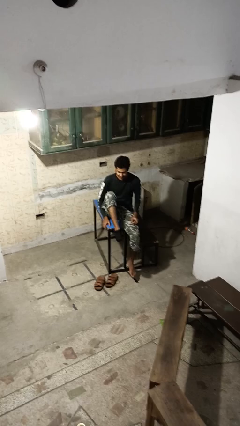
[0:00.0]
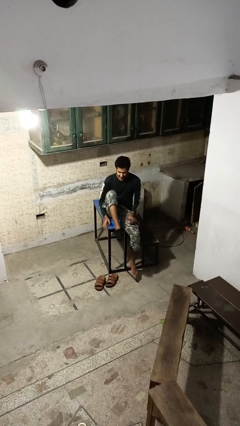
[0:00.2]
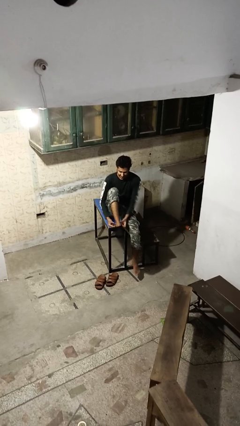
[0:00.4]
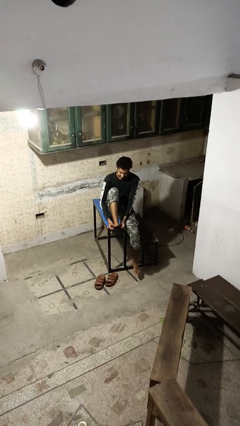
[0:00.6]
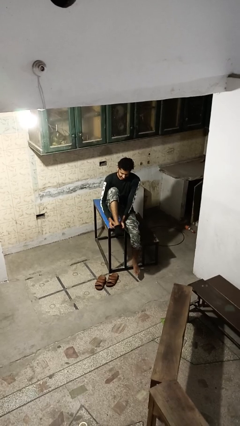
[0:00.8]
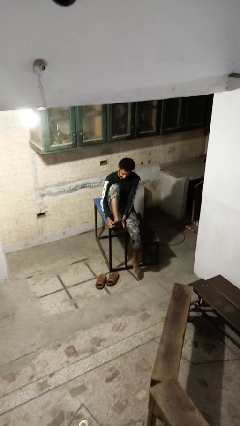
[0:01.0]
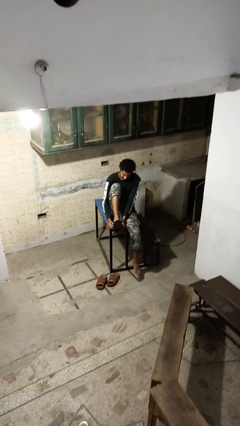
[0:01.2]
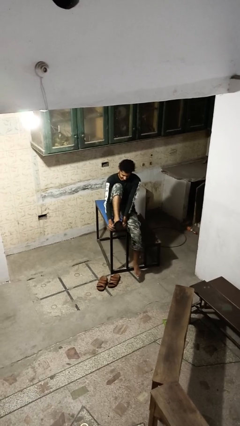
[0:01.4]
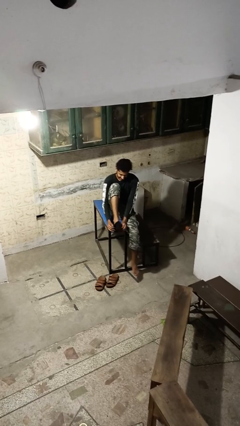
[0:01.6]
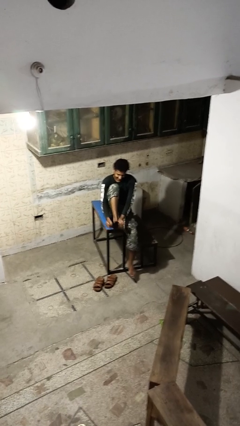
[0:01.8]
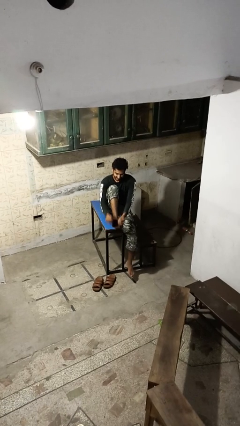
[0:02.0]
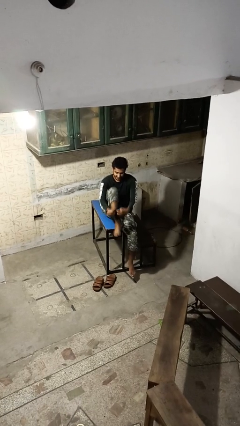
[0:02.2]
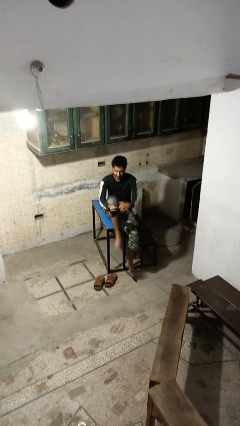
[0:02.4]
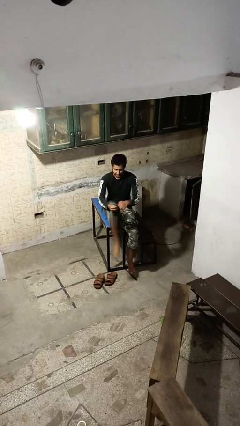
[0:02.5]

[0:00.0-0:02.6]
person takes off socks

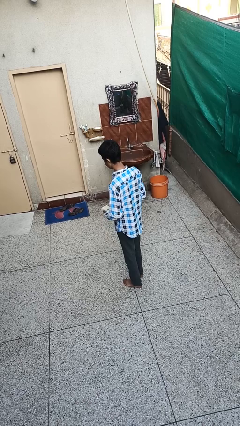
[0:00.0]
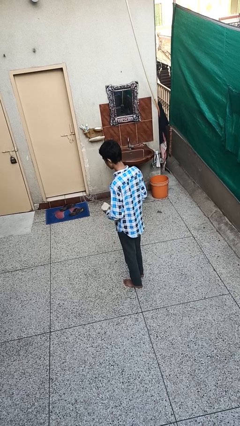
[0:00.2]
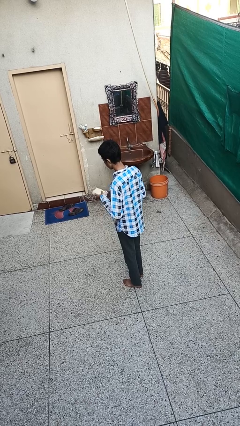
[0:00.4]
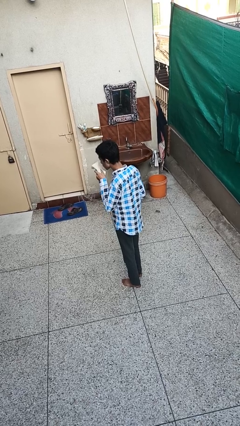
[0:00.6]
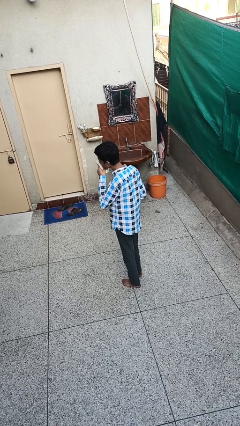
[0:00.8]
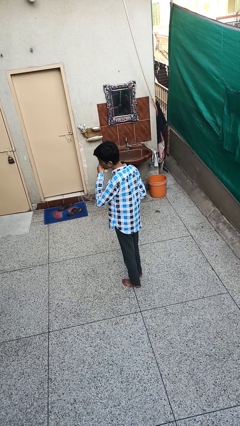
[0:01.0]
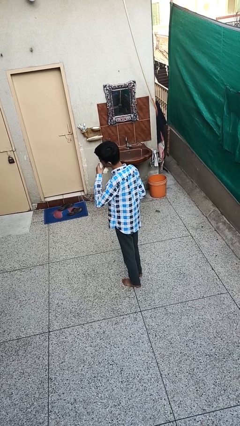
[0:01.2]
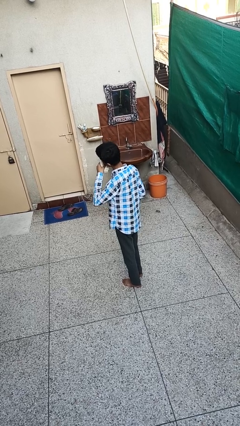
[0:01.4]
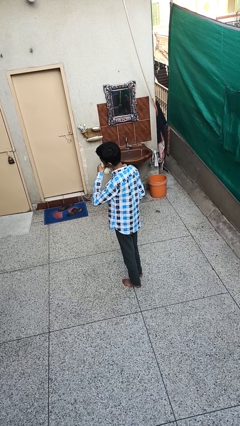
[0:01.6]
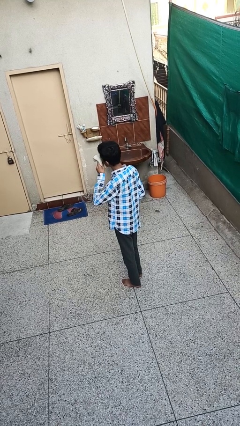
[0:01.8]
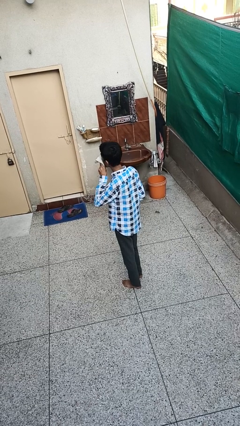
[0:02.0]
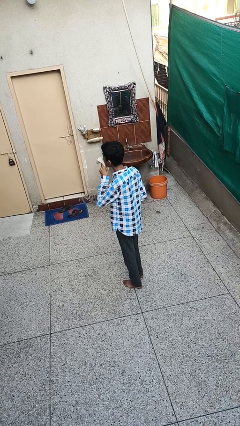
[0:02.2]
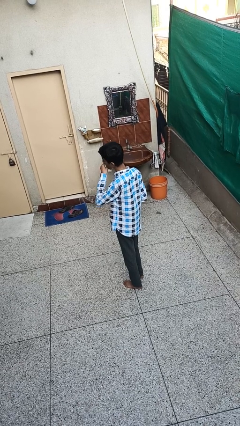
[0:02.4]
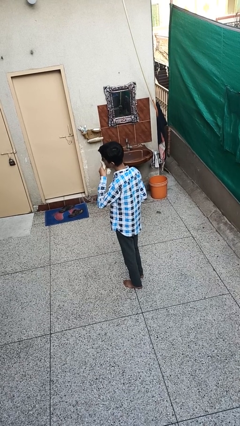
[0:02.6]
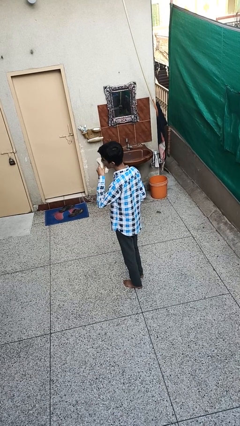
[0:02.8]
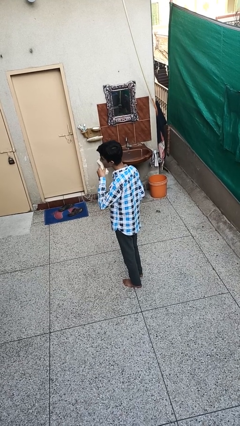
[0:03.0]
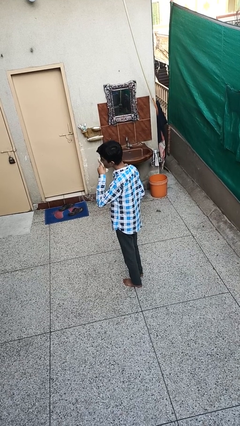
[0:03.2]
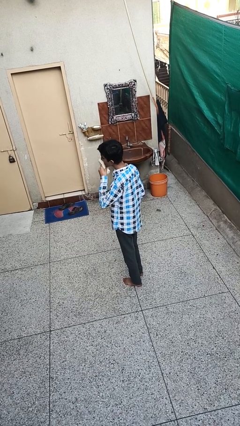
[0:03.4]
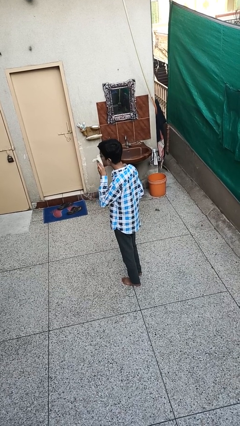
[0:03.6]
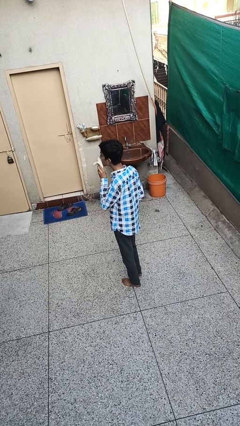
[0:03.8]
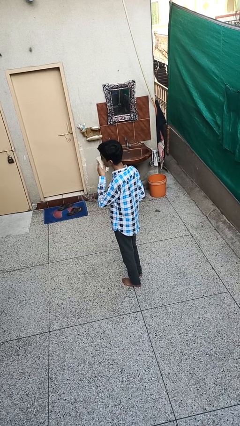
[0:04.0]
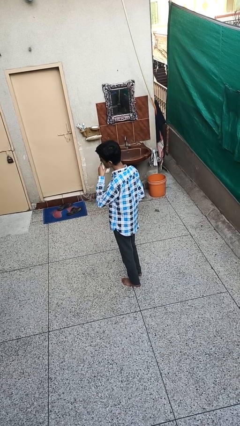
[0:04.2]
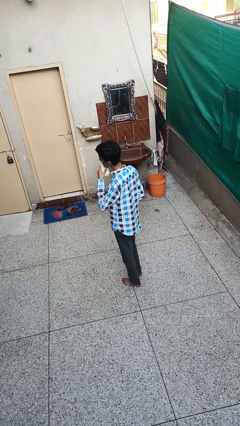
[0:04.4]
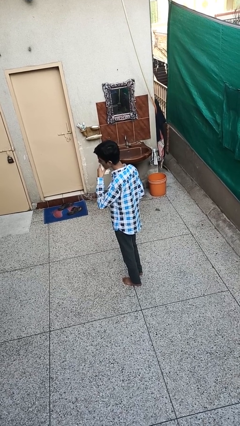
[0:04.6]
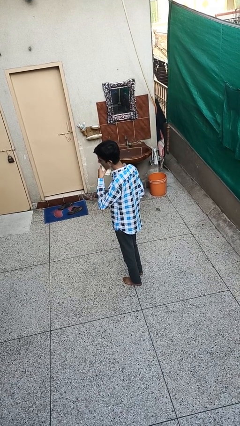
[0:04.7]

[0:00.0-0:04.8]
person wipes mouth with napkin

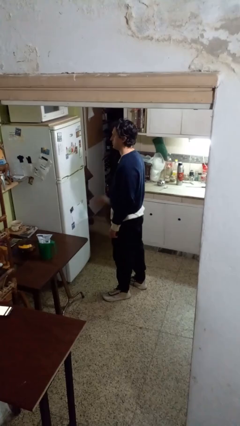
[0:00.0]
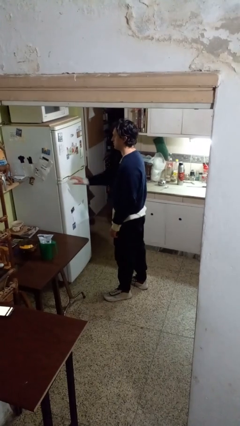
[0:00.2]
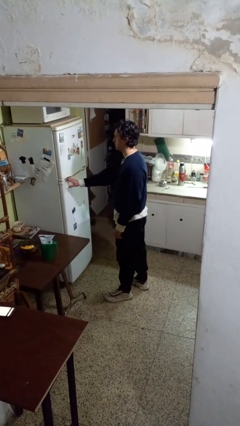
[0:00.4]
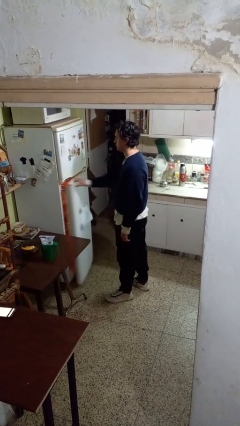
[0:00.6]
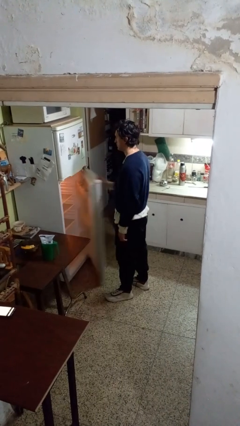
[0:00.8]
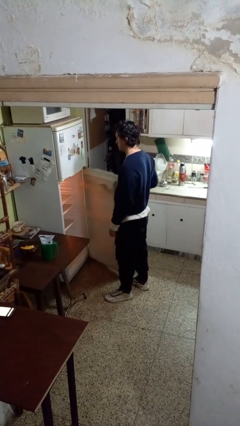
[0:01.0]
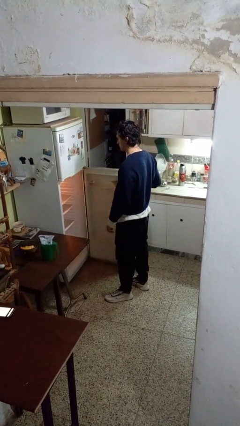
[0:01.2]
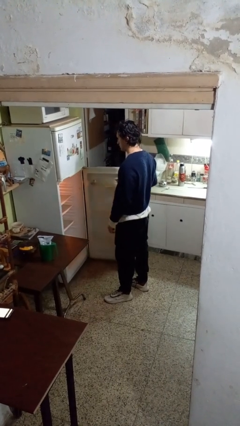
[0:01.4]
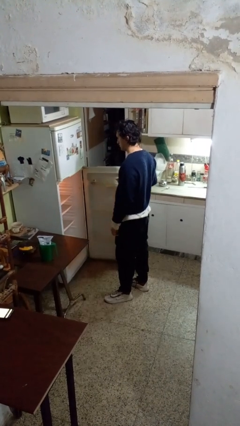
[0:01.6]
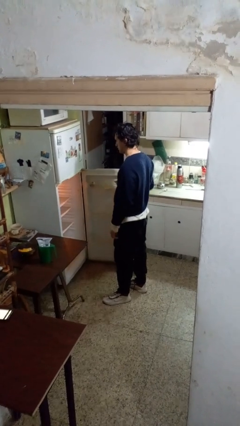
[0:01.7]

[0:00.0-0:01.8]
person opens refrigerator

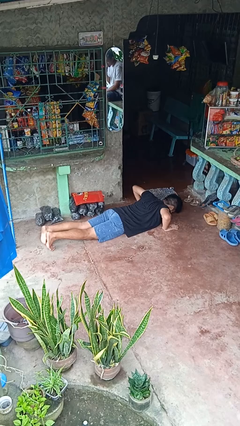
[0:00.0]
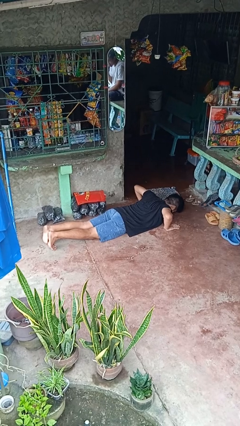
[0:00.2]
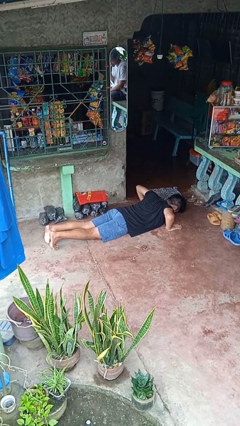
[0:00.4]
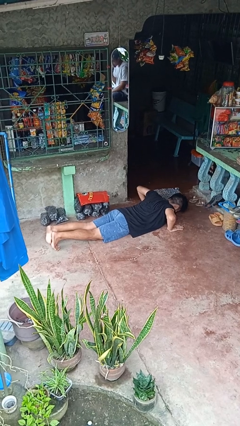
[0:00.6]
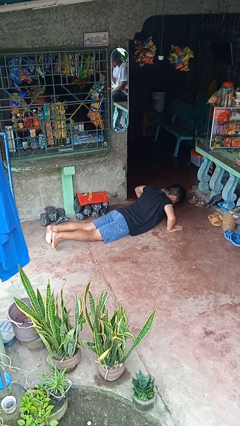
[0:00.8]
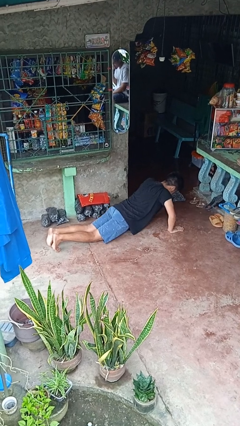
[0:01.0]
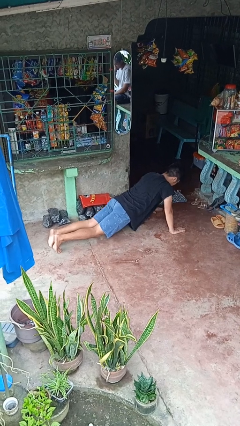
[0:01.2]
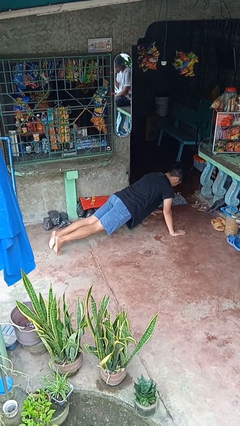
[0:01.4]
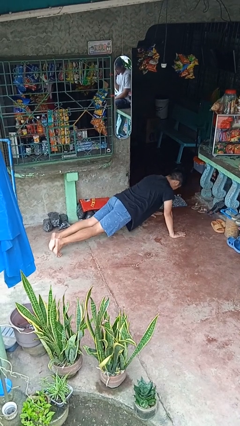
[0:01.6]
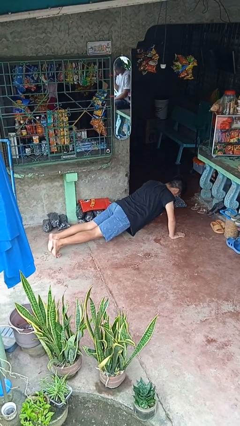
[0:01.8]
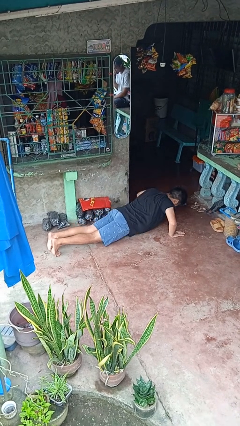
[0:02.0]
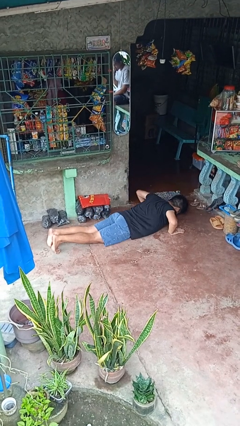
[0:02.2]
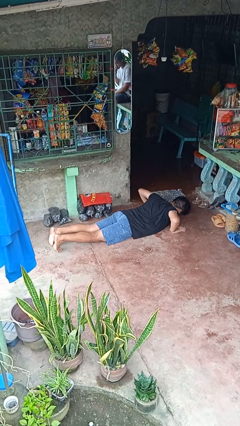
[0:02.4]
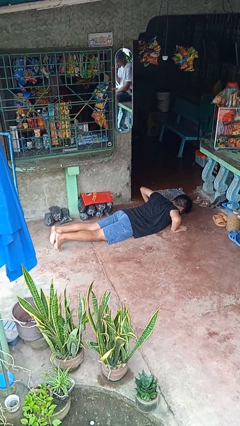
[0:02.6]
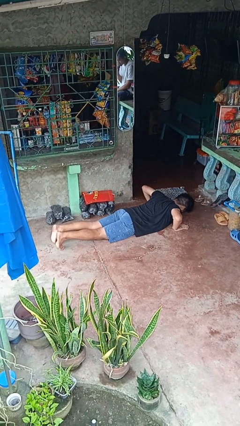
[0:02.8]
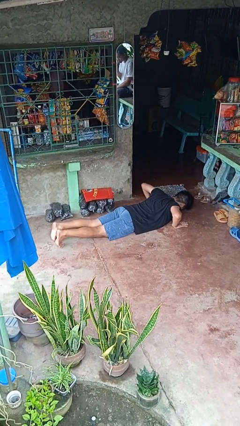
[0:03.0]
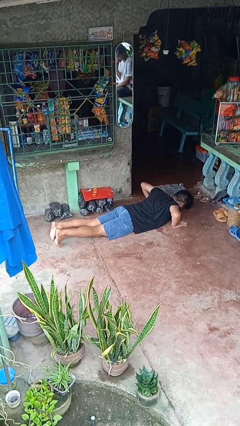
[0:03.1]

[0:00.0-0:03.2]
person exercises with pushup

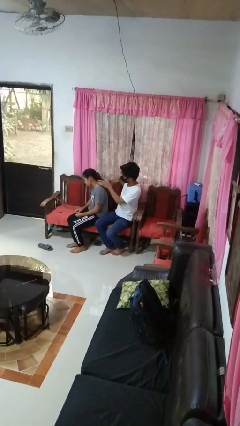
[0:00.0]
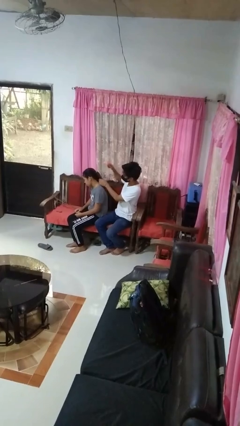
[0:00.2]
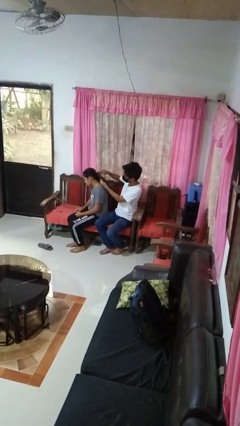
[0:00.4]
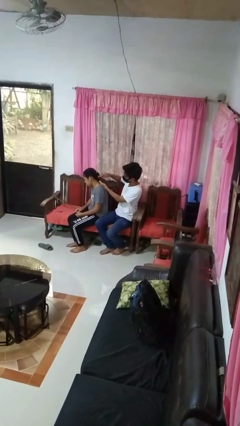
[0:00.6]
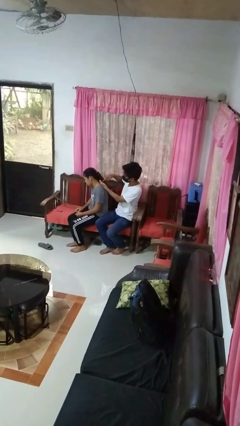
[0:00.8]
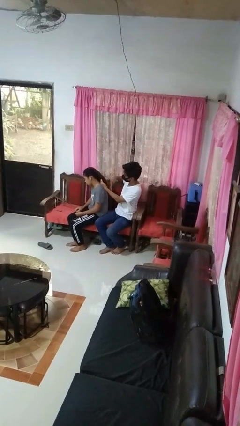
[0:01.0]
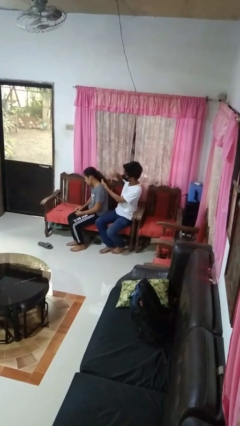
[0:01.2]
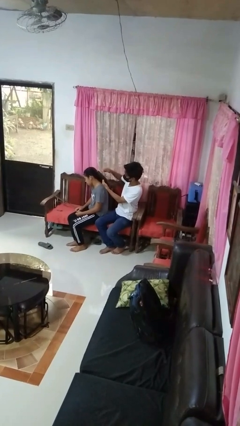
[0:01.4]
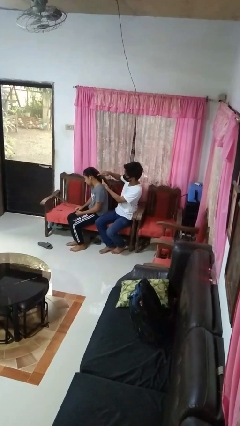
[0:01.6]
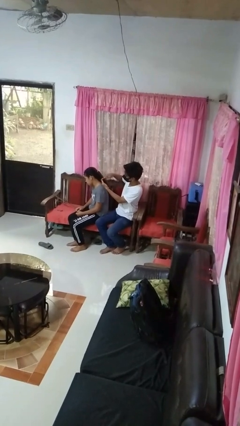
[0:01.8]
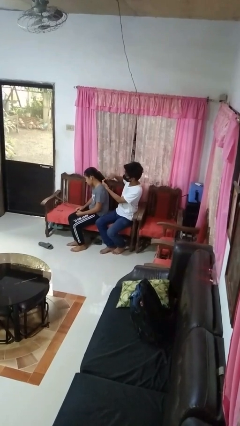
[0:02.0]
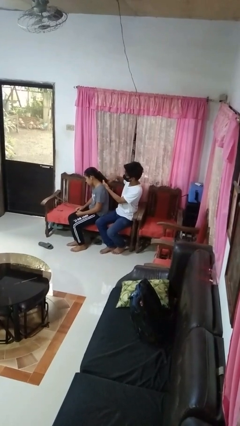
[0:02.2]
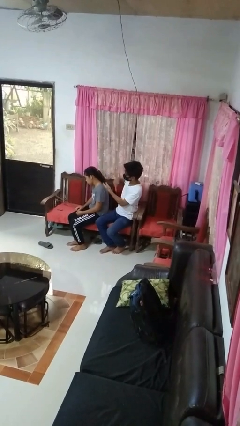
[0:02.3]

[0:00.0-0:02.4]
person brushes hair of person

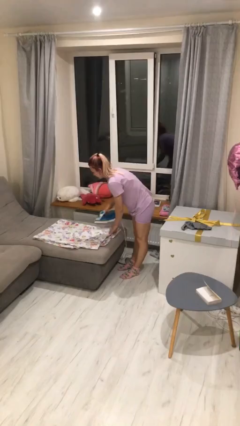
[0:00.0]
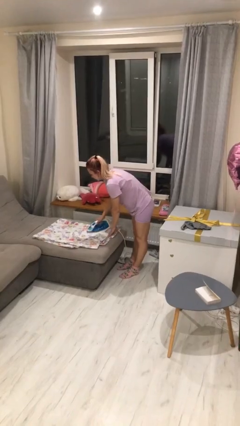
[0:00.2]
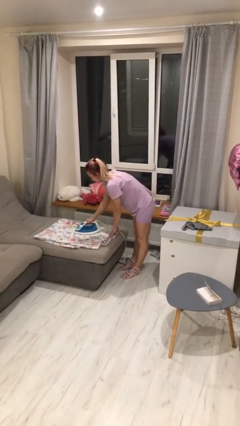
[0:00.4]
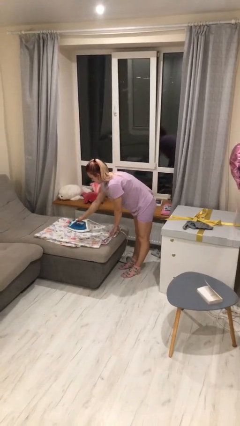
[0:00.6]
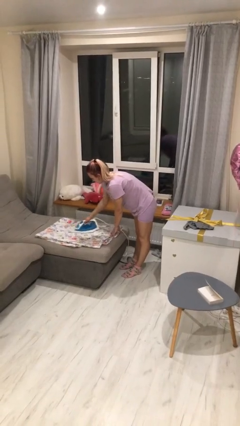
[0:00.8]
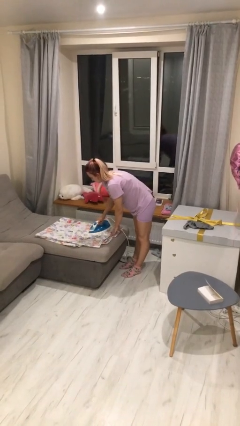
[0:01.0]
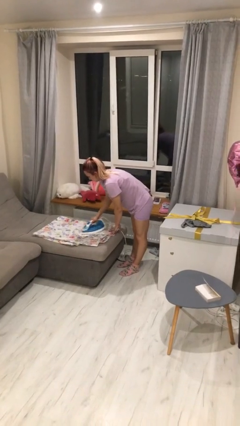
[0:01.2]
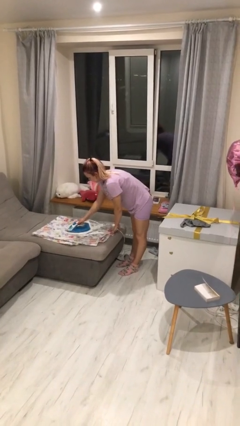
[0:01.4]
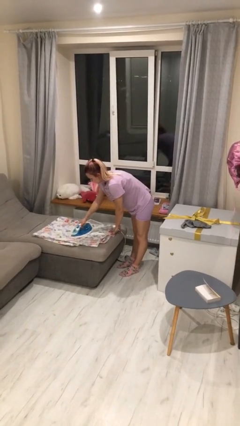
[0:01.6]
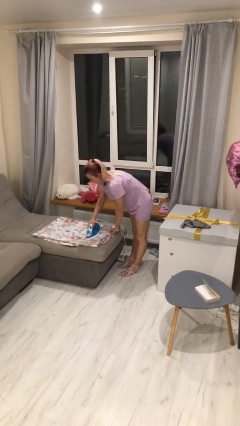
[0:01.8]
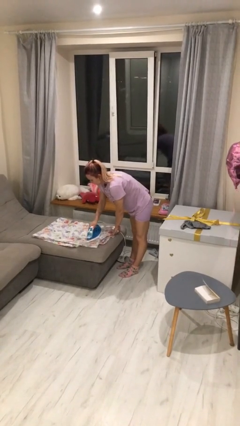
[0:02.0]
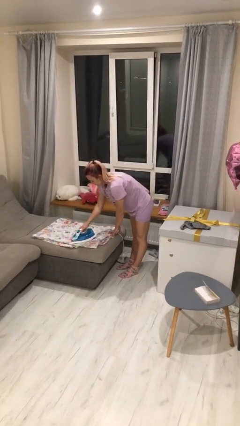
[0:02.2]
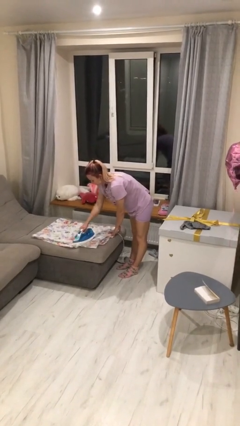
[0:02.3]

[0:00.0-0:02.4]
person irons clothes
